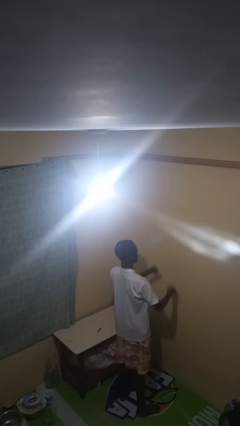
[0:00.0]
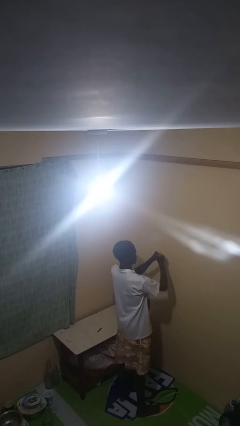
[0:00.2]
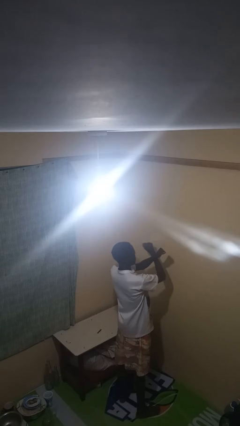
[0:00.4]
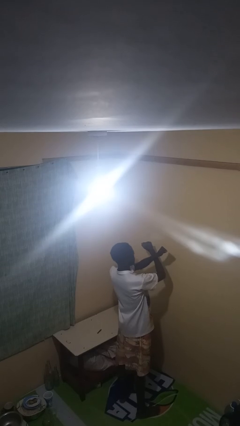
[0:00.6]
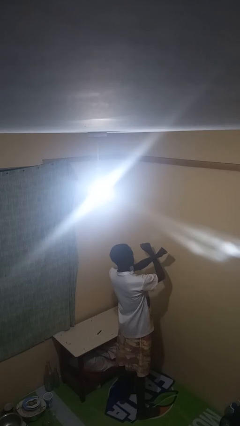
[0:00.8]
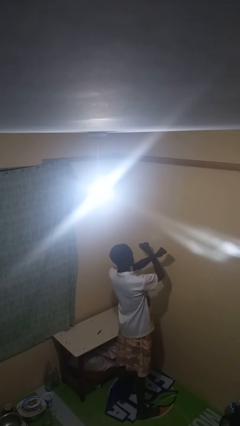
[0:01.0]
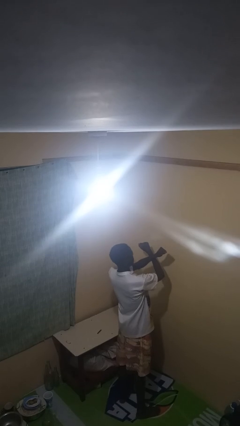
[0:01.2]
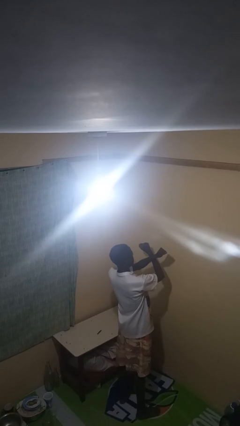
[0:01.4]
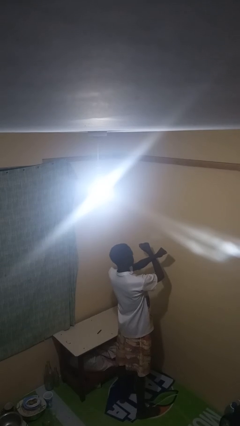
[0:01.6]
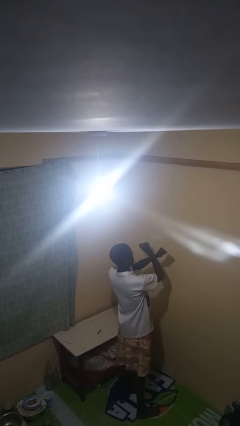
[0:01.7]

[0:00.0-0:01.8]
person gestures arms x

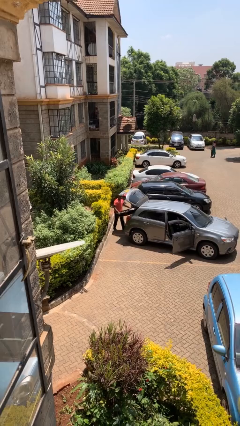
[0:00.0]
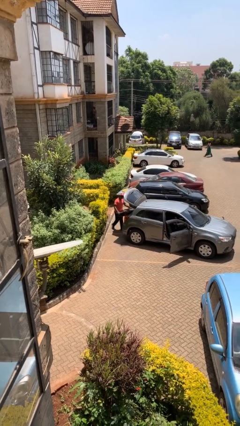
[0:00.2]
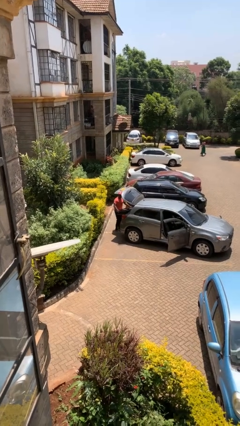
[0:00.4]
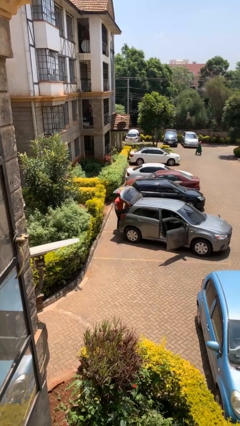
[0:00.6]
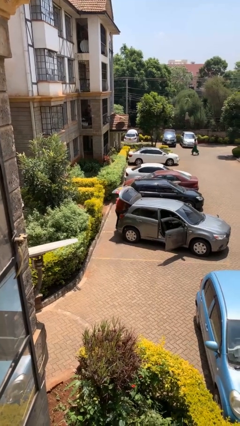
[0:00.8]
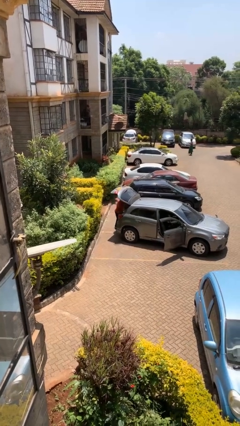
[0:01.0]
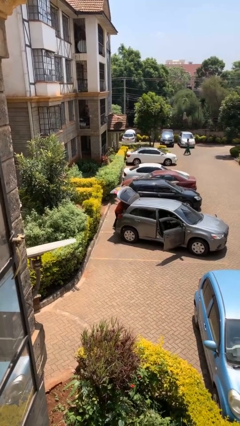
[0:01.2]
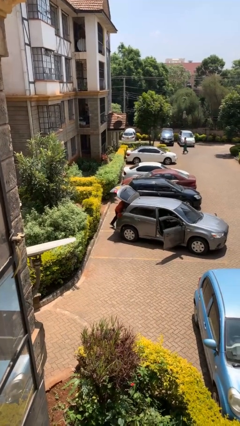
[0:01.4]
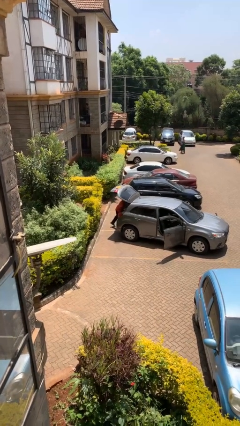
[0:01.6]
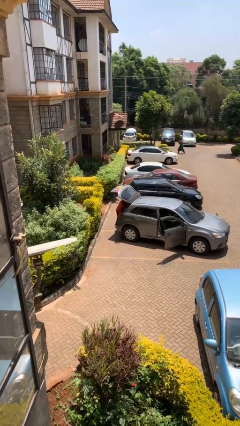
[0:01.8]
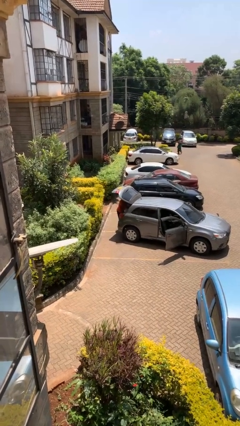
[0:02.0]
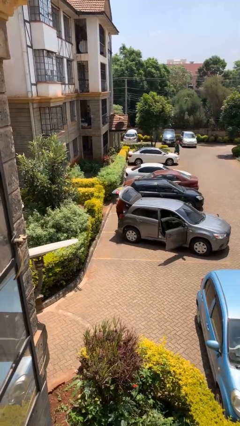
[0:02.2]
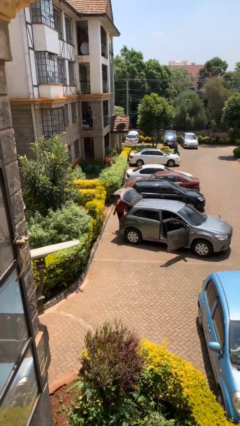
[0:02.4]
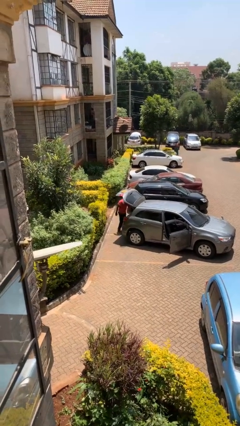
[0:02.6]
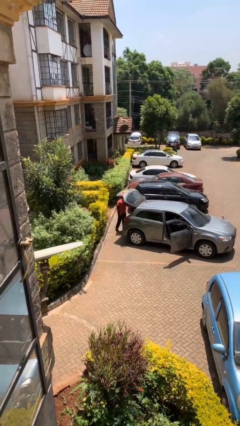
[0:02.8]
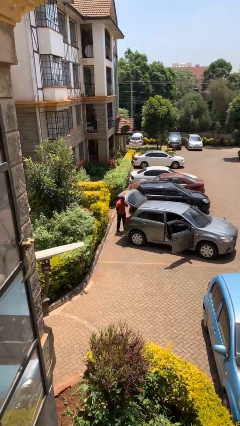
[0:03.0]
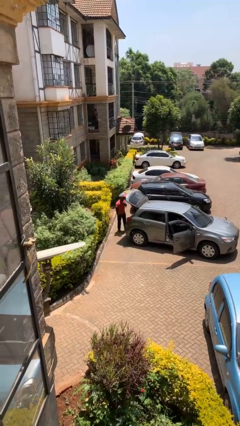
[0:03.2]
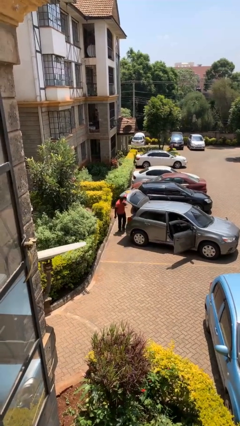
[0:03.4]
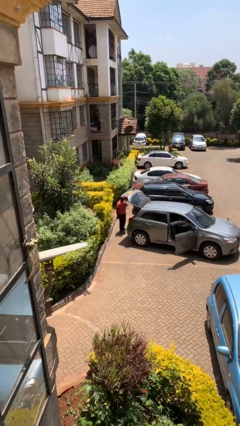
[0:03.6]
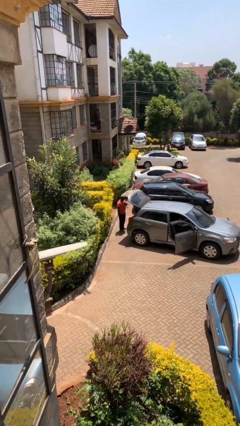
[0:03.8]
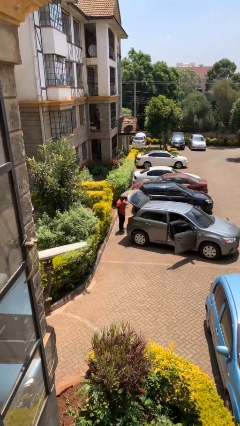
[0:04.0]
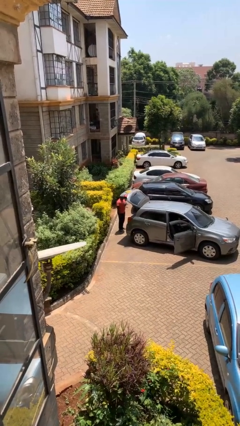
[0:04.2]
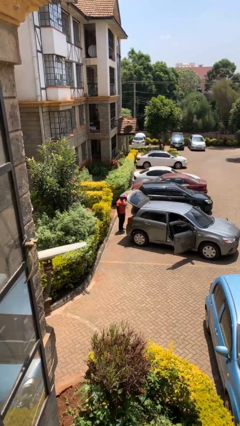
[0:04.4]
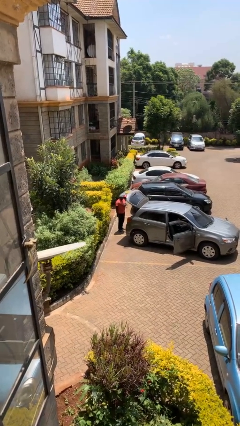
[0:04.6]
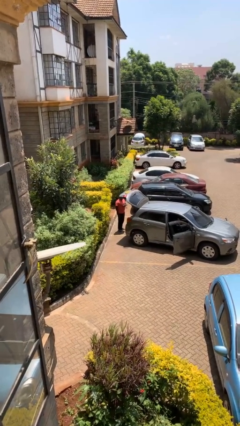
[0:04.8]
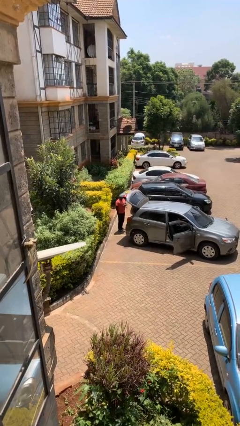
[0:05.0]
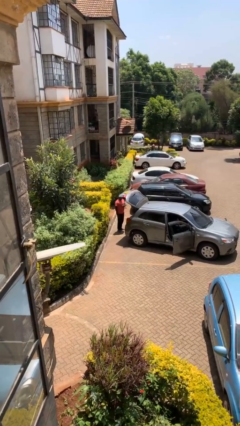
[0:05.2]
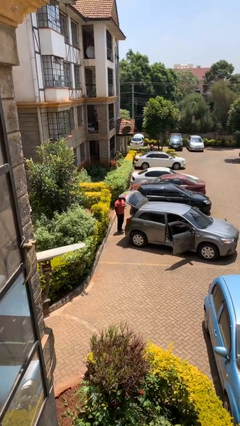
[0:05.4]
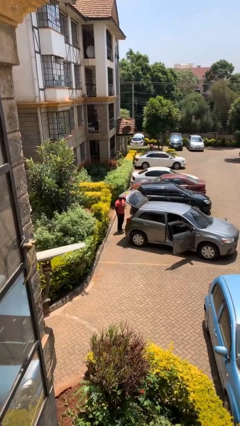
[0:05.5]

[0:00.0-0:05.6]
person loads car

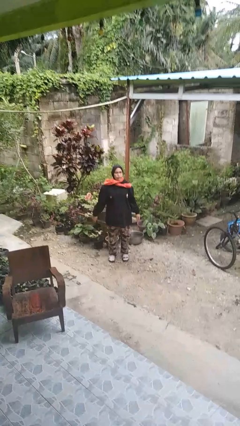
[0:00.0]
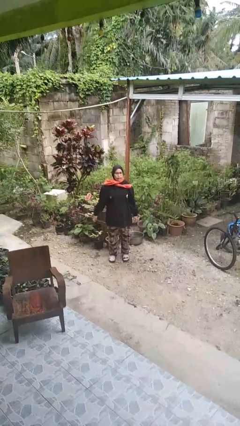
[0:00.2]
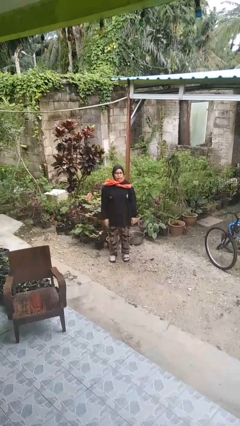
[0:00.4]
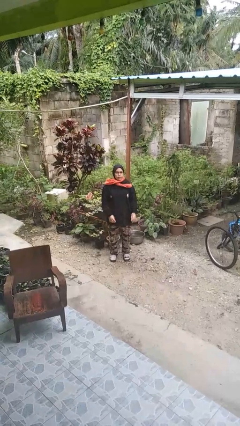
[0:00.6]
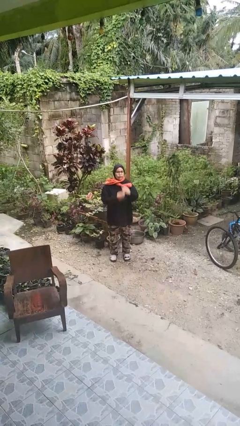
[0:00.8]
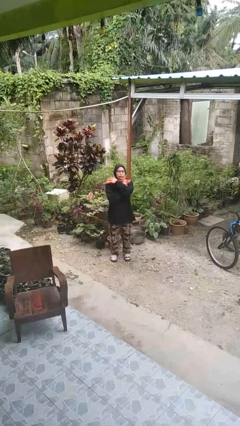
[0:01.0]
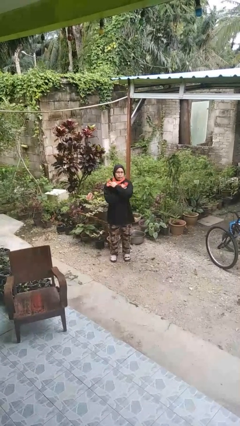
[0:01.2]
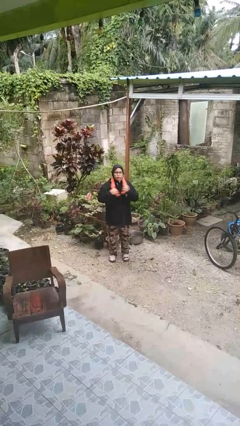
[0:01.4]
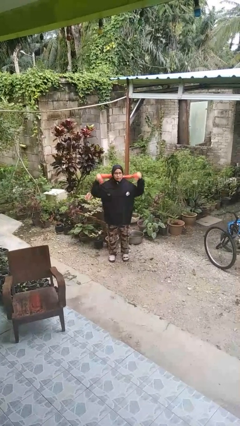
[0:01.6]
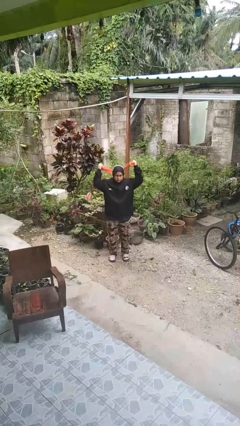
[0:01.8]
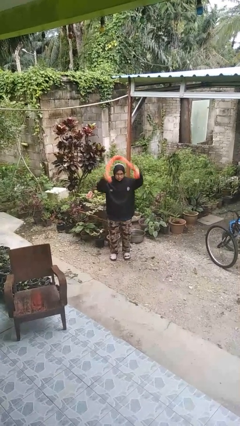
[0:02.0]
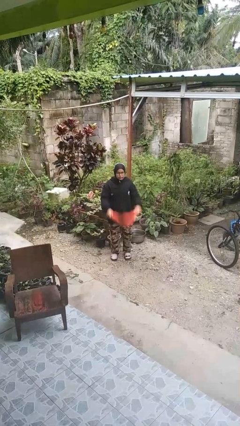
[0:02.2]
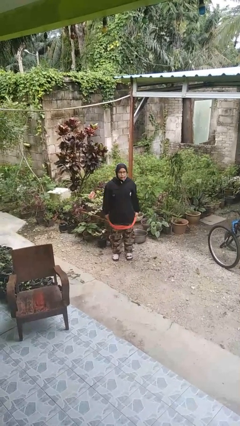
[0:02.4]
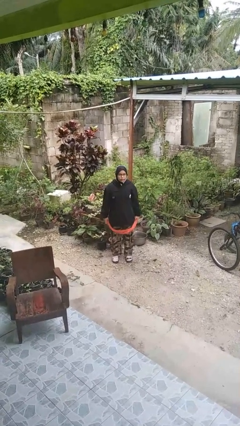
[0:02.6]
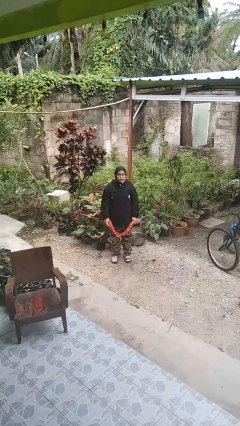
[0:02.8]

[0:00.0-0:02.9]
person takes off scarf

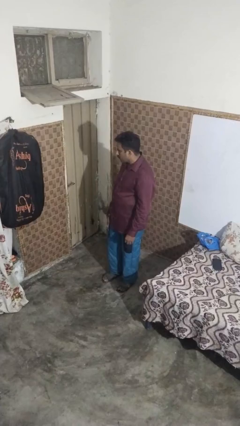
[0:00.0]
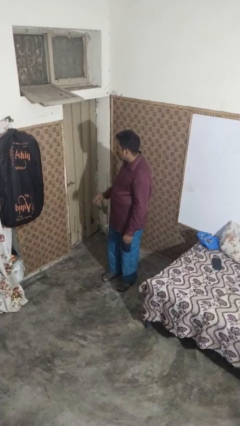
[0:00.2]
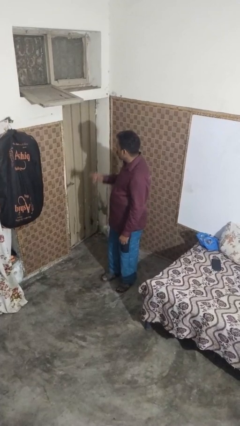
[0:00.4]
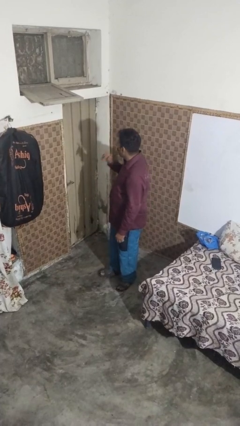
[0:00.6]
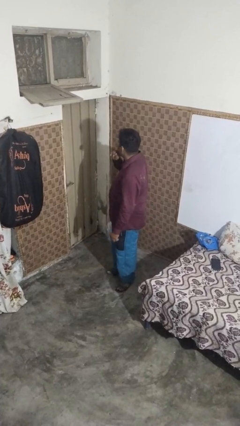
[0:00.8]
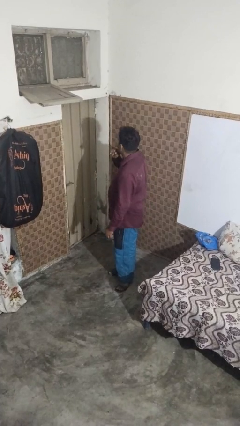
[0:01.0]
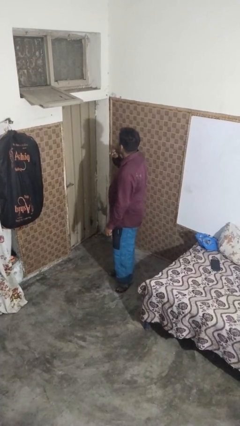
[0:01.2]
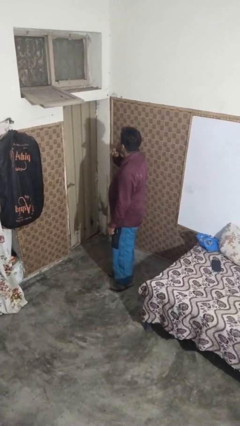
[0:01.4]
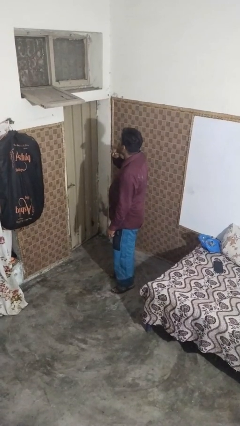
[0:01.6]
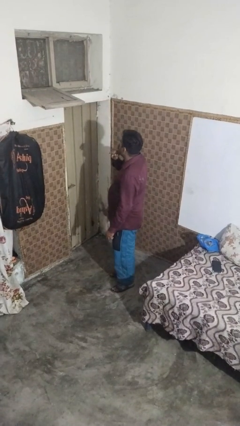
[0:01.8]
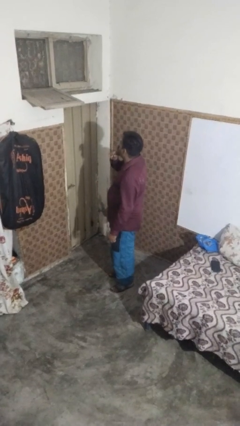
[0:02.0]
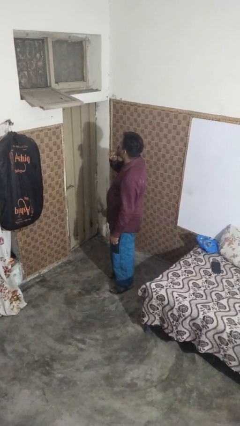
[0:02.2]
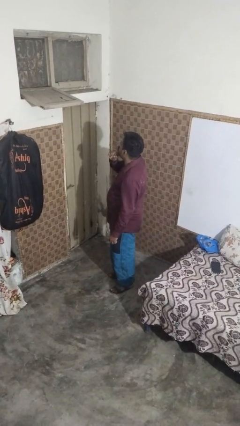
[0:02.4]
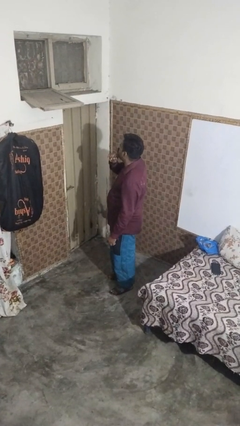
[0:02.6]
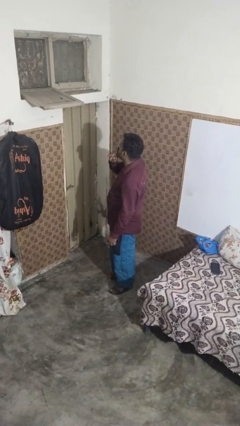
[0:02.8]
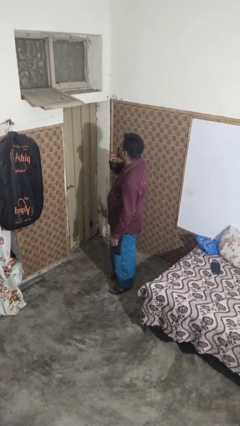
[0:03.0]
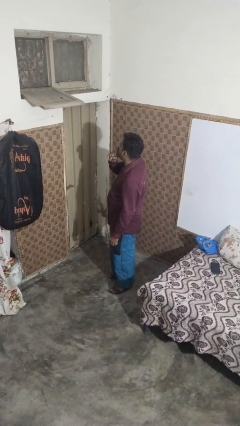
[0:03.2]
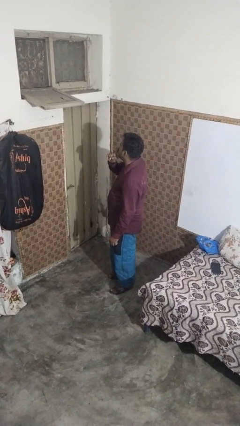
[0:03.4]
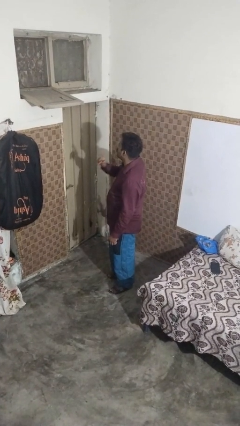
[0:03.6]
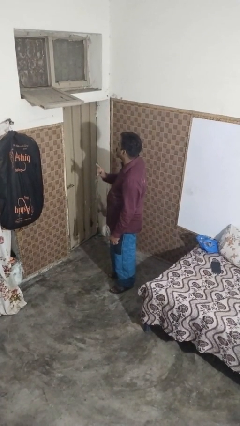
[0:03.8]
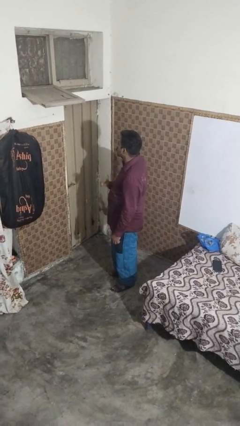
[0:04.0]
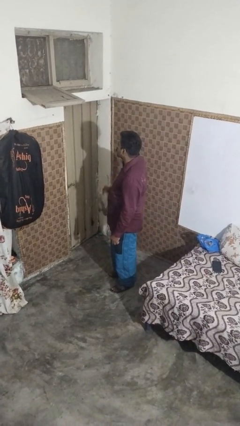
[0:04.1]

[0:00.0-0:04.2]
person gestures be quiet

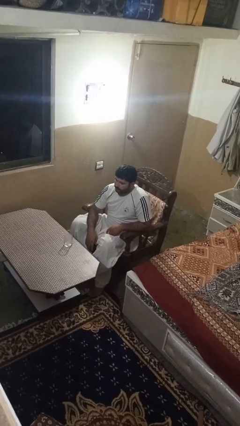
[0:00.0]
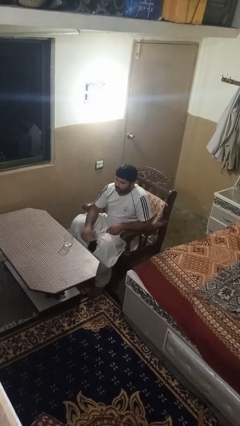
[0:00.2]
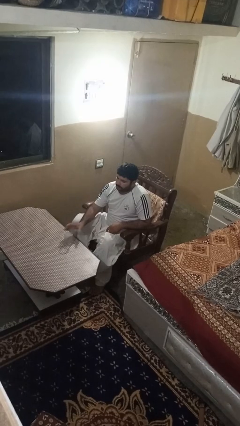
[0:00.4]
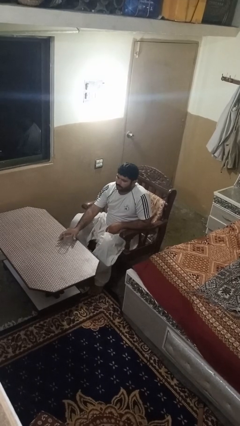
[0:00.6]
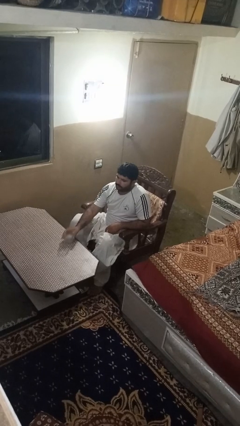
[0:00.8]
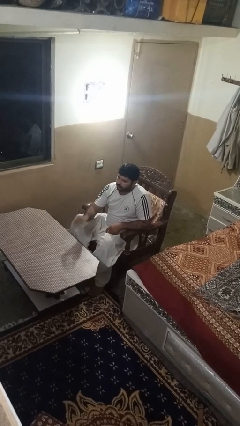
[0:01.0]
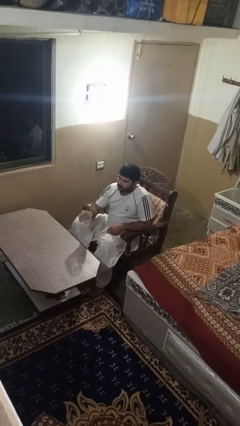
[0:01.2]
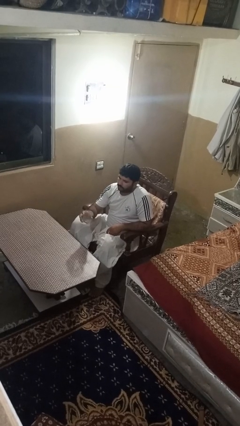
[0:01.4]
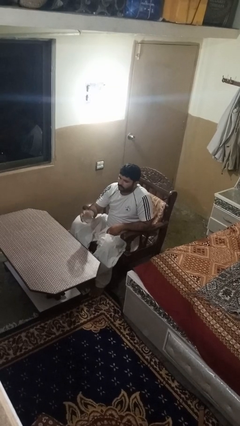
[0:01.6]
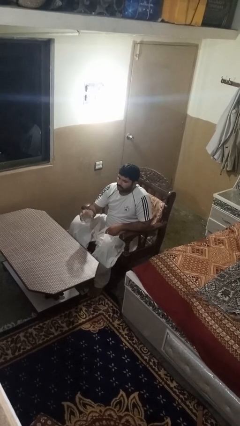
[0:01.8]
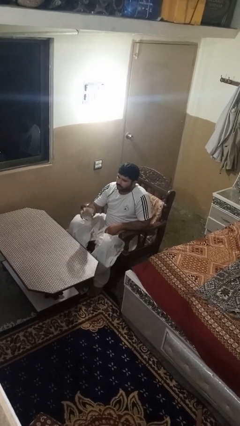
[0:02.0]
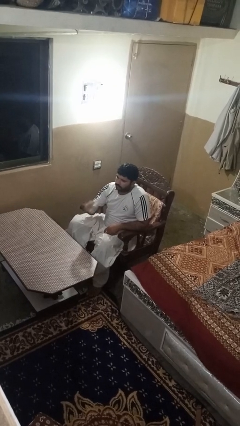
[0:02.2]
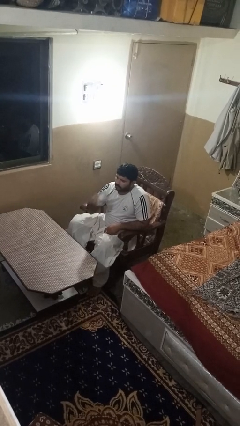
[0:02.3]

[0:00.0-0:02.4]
person picks up object from table

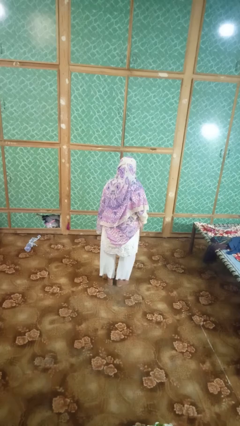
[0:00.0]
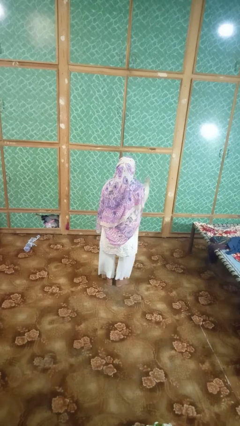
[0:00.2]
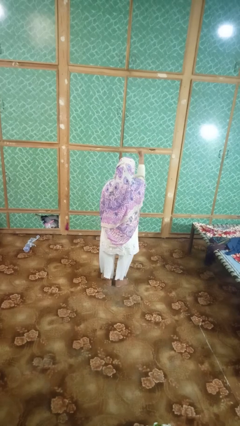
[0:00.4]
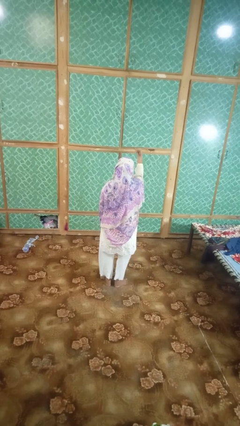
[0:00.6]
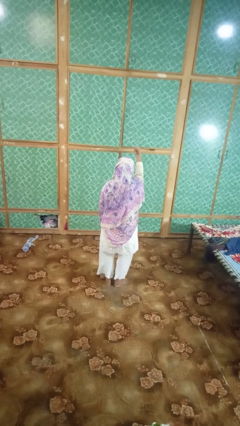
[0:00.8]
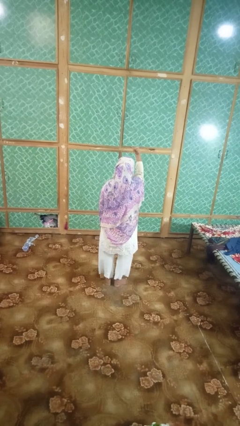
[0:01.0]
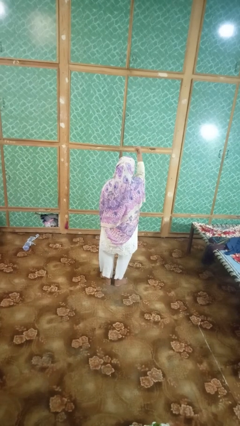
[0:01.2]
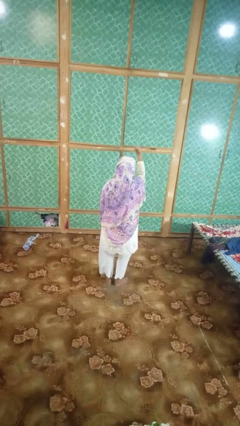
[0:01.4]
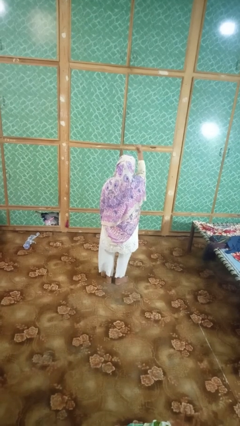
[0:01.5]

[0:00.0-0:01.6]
person gestures hang loose
